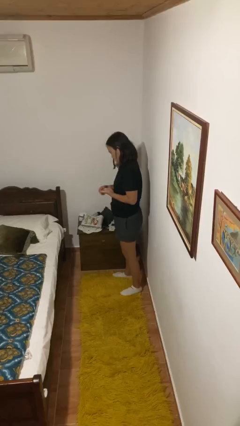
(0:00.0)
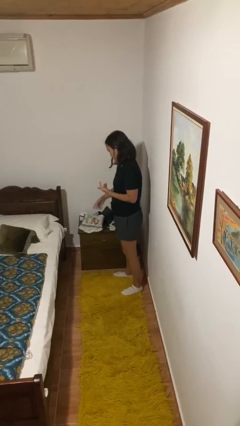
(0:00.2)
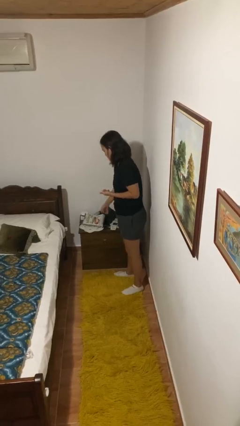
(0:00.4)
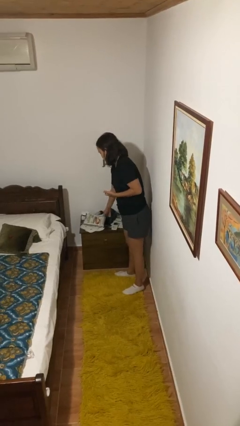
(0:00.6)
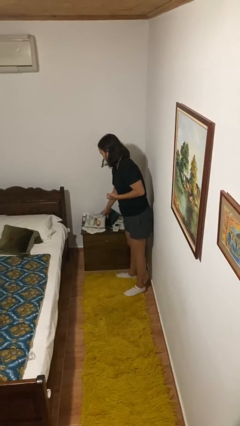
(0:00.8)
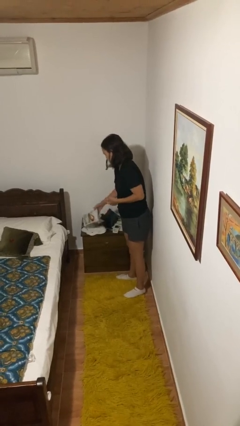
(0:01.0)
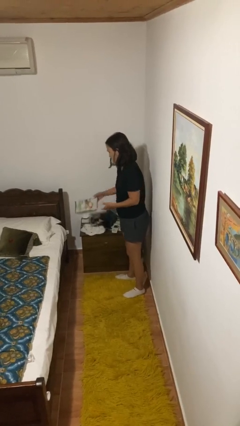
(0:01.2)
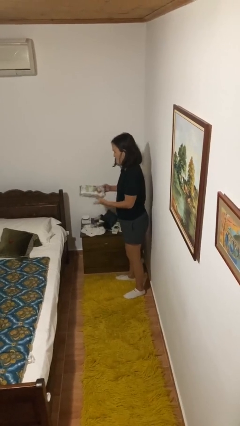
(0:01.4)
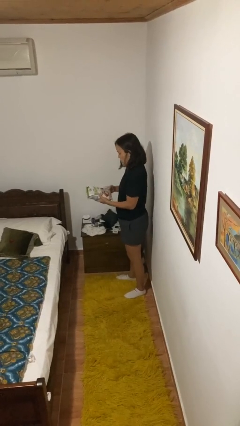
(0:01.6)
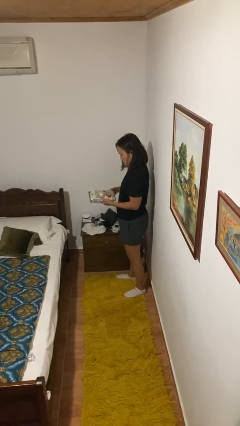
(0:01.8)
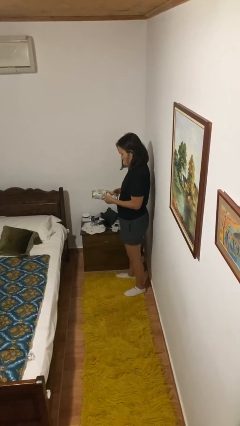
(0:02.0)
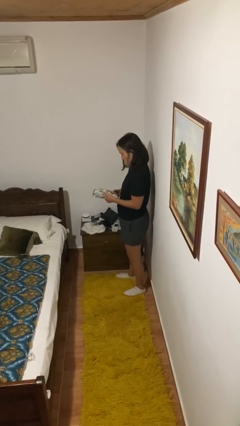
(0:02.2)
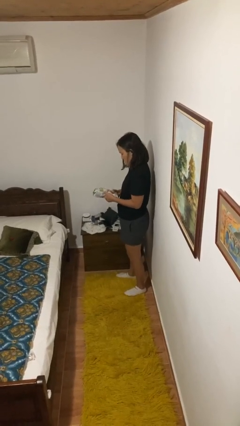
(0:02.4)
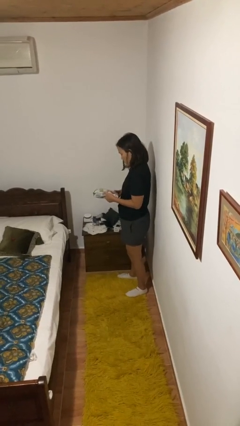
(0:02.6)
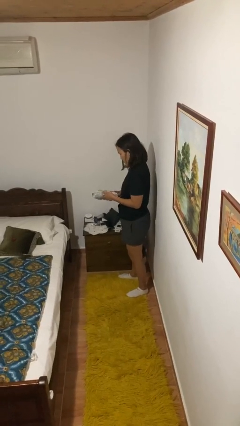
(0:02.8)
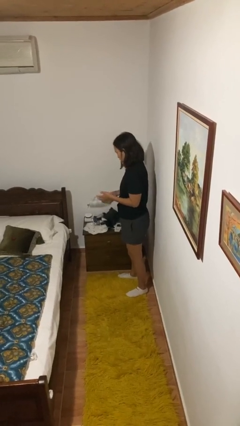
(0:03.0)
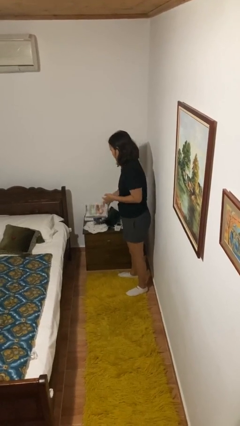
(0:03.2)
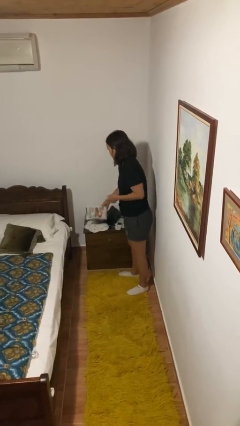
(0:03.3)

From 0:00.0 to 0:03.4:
person picks up object from countertop

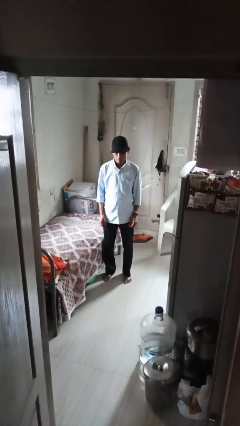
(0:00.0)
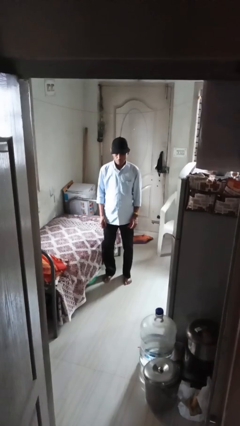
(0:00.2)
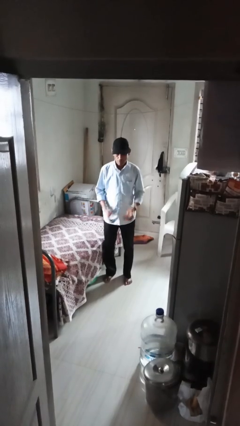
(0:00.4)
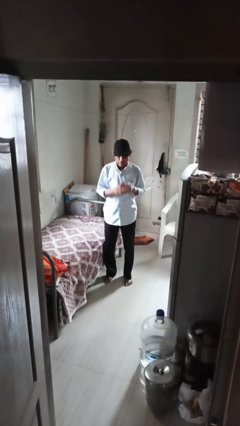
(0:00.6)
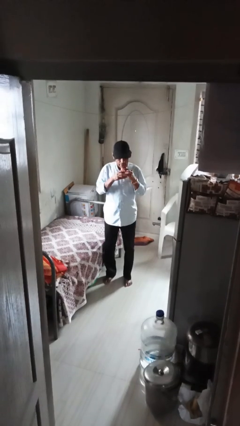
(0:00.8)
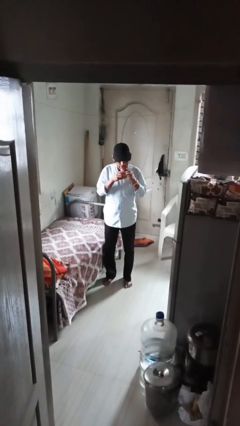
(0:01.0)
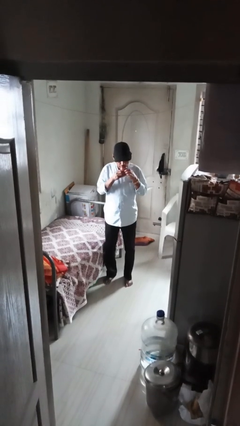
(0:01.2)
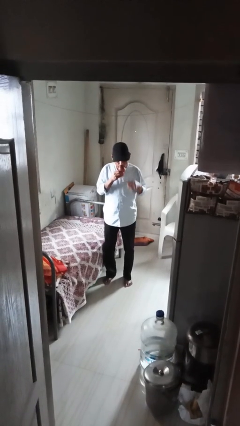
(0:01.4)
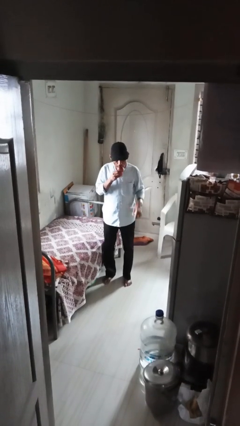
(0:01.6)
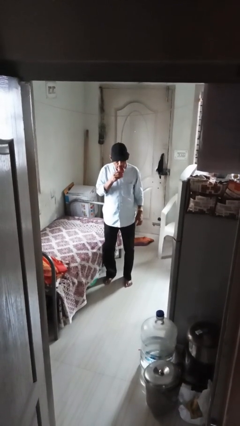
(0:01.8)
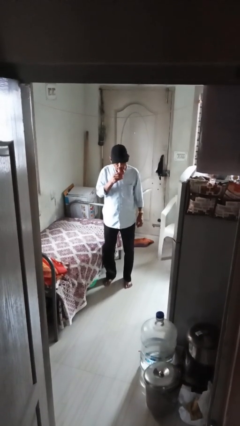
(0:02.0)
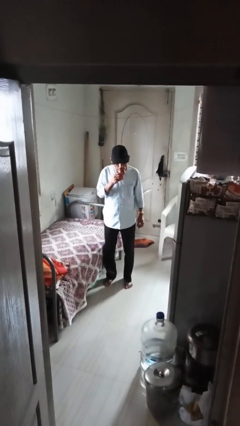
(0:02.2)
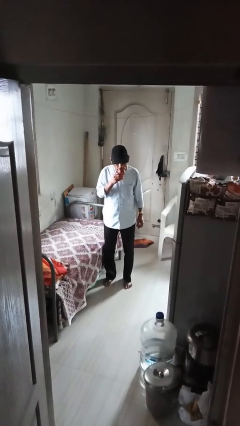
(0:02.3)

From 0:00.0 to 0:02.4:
person eats apple

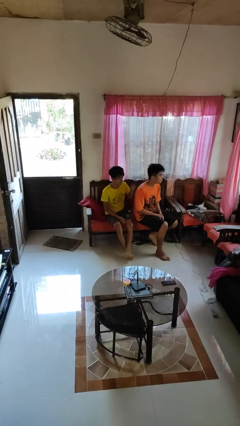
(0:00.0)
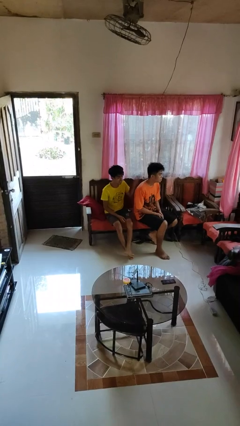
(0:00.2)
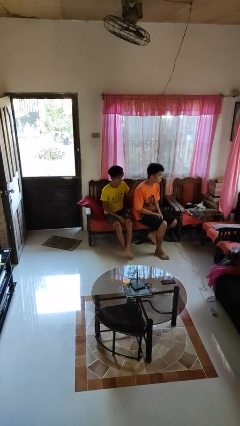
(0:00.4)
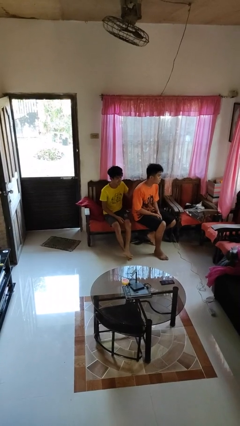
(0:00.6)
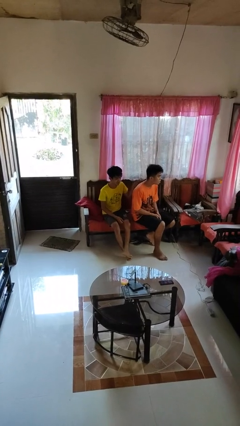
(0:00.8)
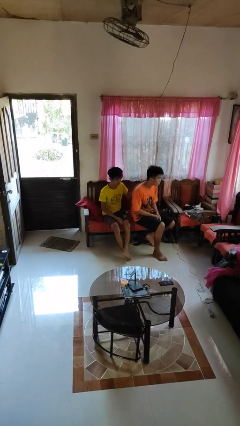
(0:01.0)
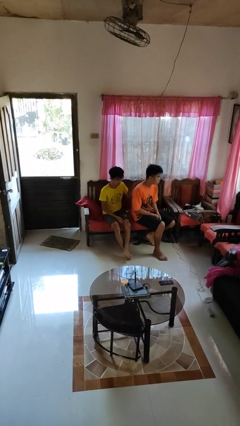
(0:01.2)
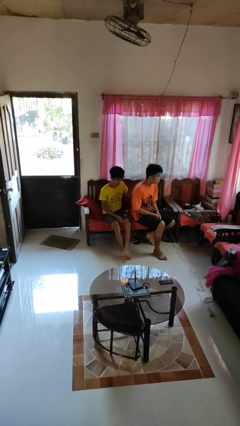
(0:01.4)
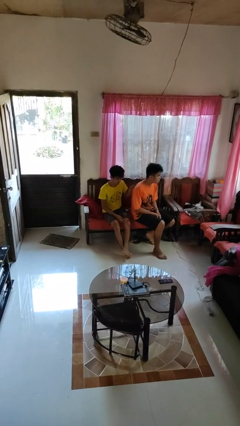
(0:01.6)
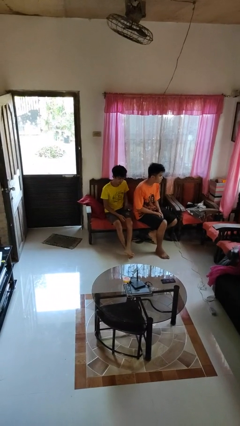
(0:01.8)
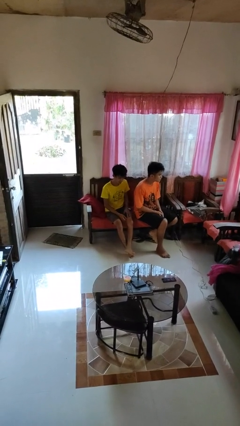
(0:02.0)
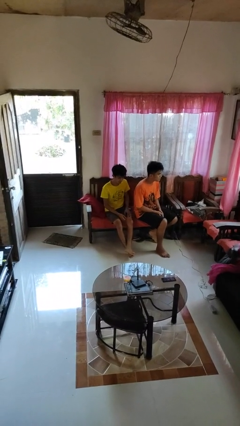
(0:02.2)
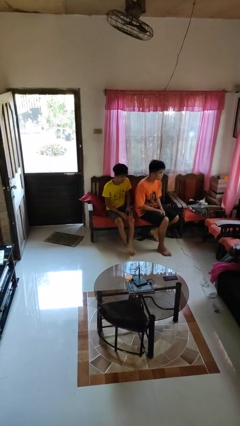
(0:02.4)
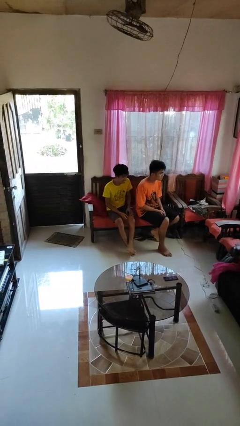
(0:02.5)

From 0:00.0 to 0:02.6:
person touches back of person

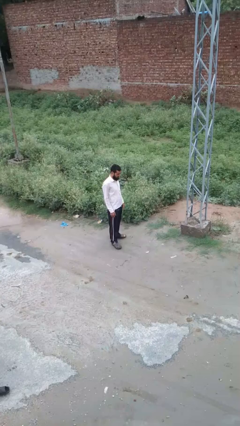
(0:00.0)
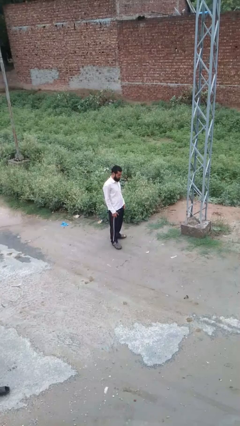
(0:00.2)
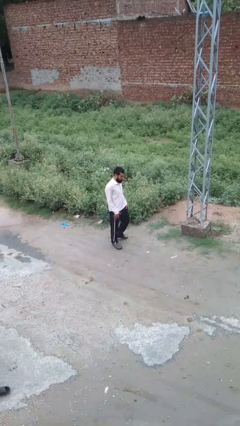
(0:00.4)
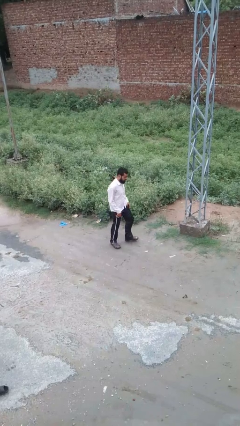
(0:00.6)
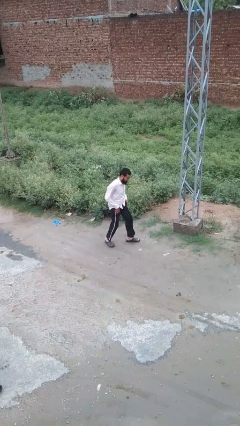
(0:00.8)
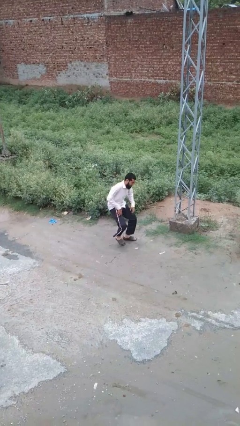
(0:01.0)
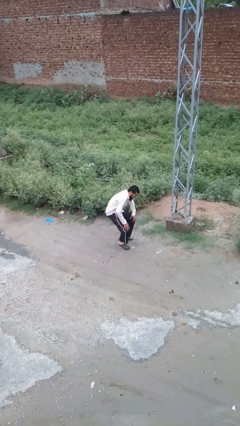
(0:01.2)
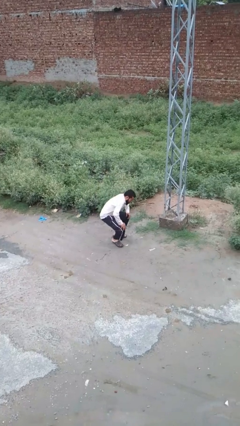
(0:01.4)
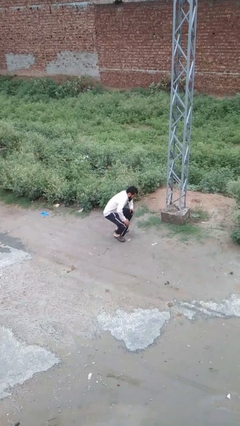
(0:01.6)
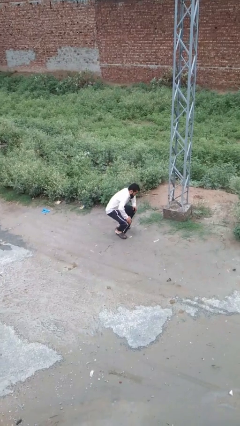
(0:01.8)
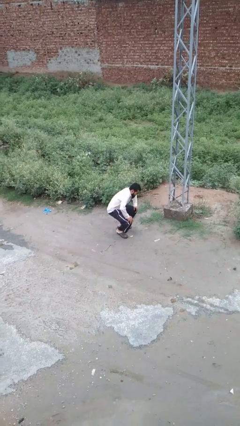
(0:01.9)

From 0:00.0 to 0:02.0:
person trips on object on floor

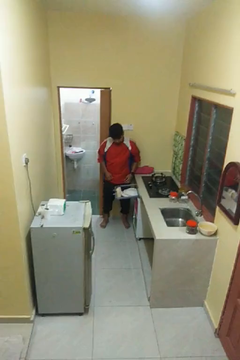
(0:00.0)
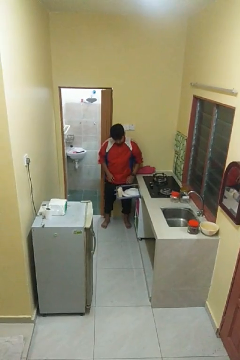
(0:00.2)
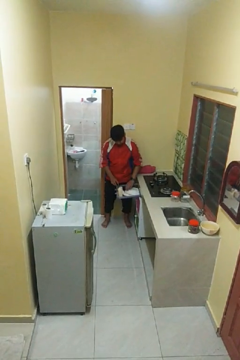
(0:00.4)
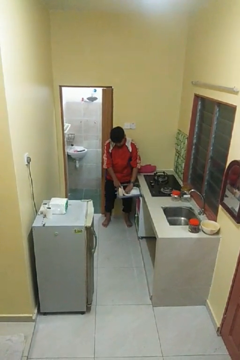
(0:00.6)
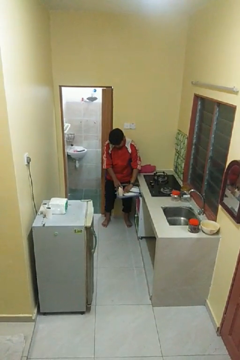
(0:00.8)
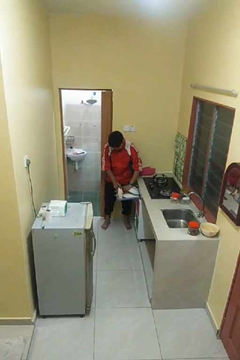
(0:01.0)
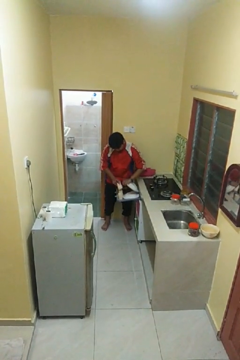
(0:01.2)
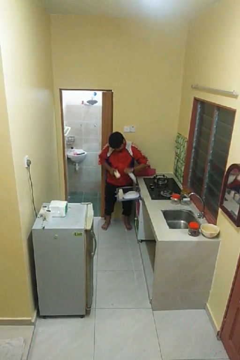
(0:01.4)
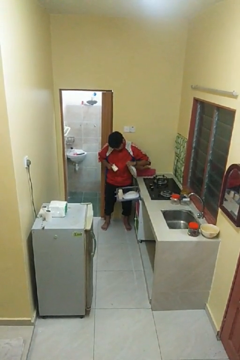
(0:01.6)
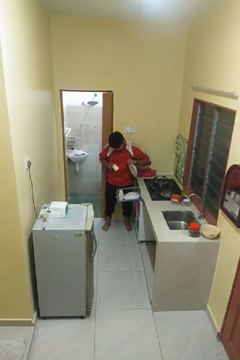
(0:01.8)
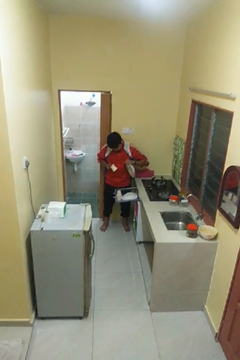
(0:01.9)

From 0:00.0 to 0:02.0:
person takes object from kitchen drawer

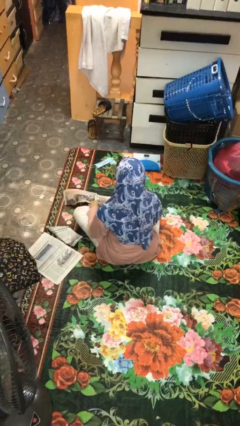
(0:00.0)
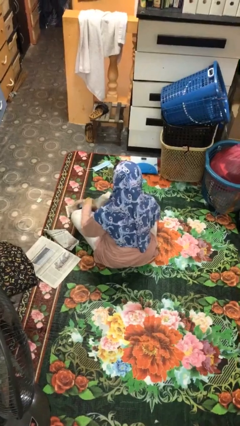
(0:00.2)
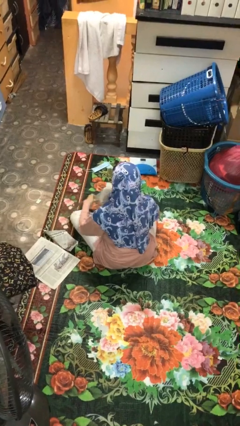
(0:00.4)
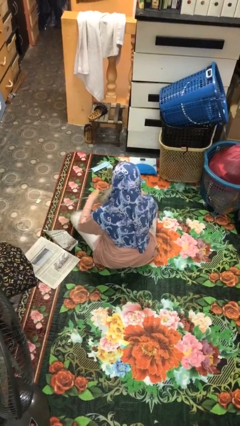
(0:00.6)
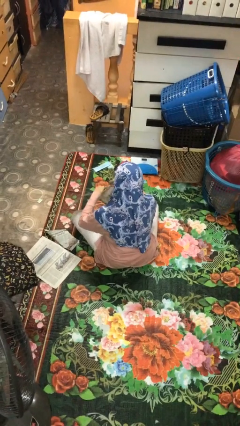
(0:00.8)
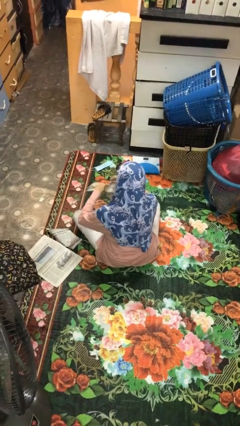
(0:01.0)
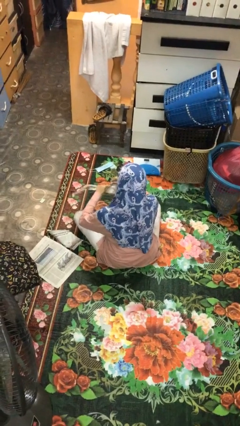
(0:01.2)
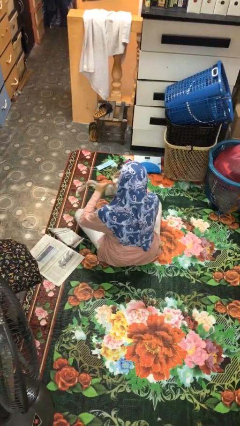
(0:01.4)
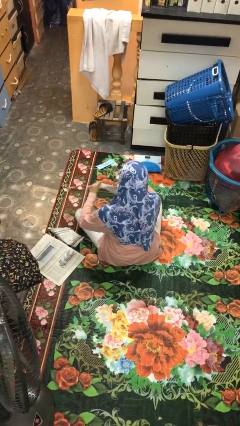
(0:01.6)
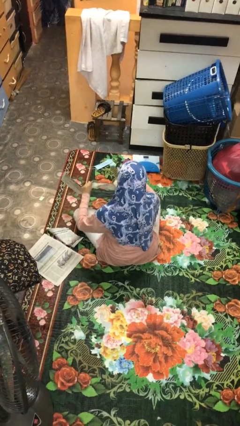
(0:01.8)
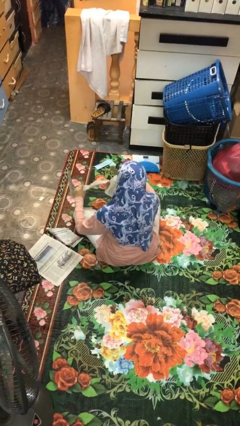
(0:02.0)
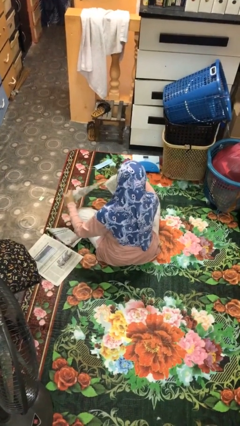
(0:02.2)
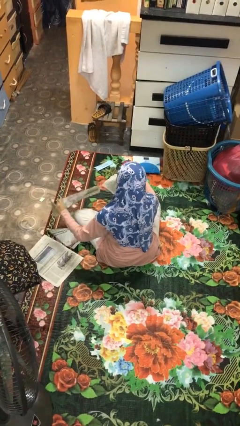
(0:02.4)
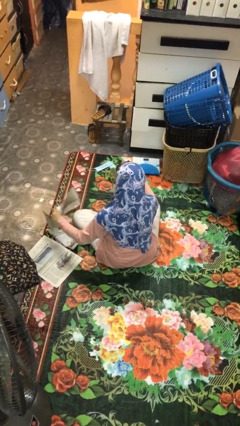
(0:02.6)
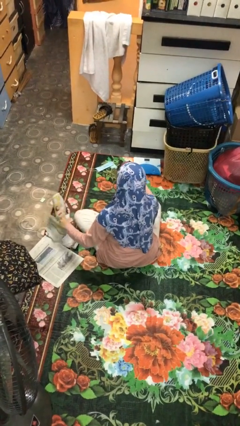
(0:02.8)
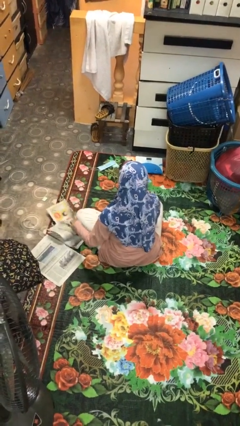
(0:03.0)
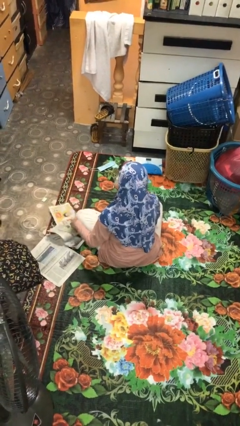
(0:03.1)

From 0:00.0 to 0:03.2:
person tears paper

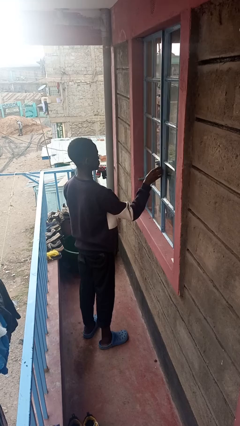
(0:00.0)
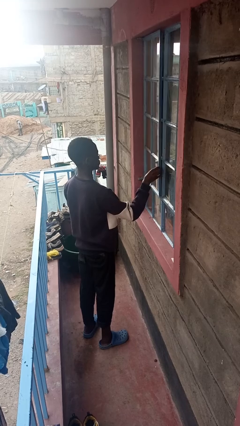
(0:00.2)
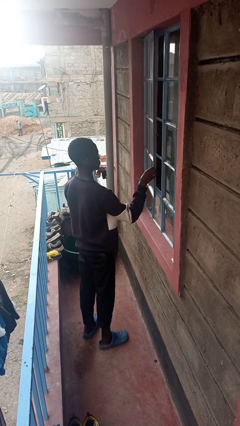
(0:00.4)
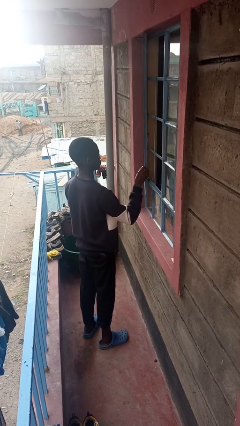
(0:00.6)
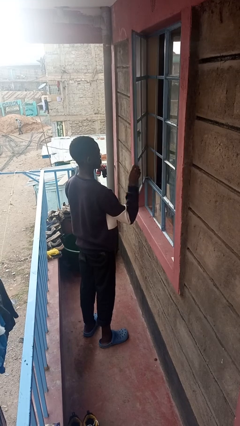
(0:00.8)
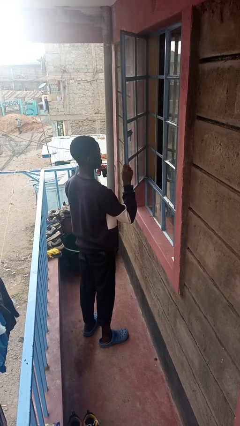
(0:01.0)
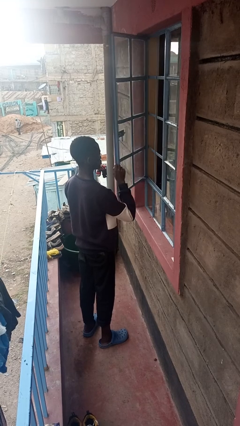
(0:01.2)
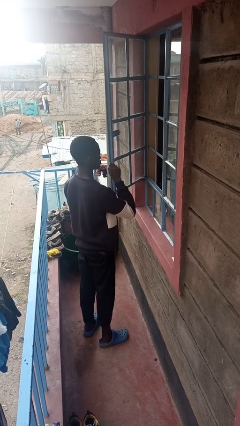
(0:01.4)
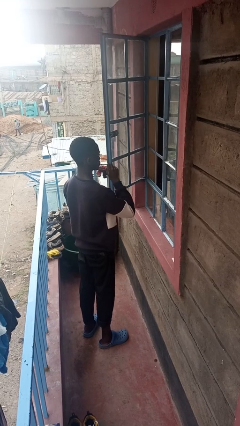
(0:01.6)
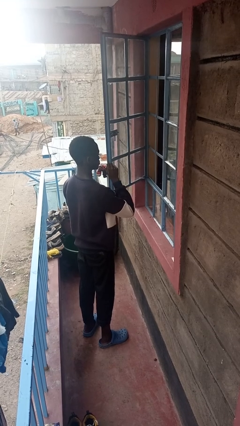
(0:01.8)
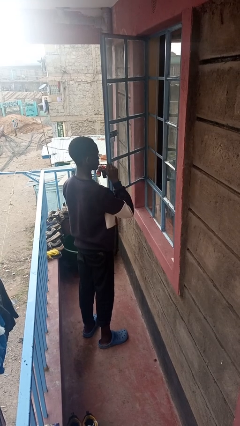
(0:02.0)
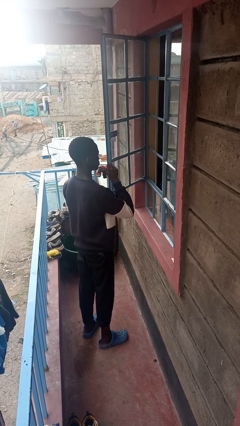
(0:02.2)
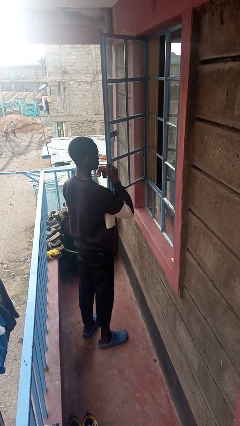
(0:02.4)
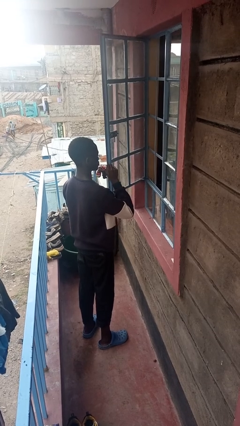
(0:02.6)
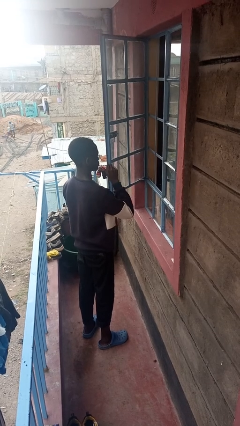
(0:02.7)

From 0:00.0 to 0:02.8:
person opens home window
